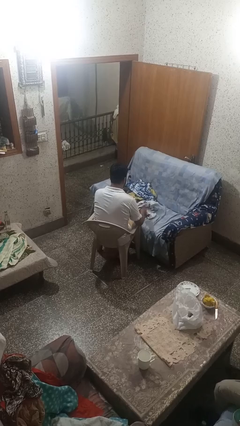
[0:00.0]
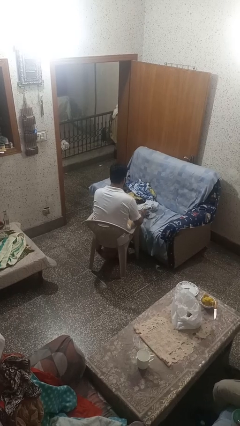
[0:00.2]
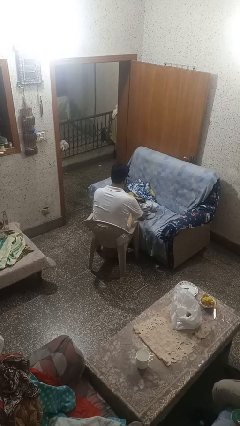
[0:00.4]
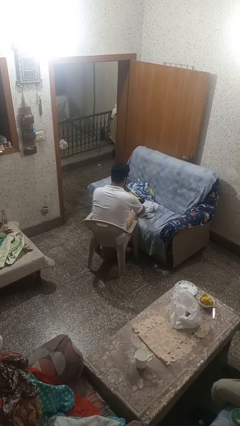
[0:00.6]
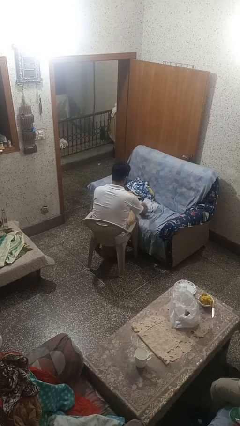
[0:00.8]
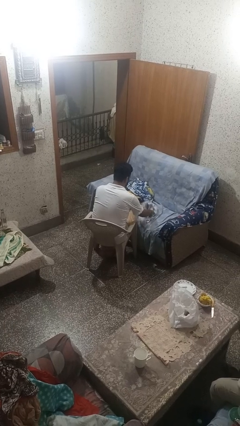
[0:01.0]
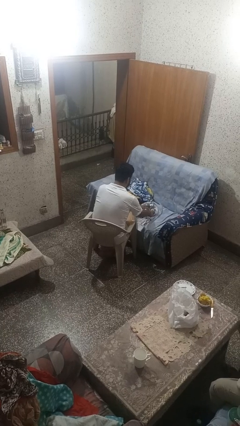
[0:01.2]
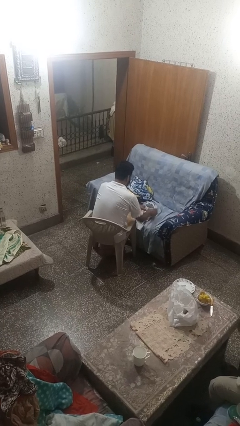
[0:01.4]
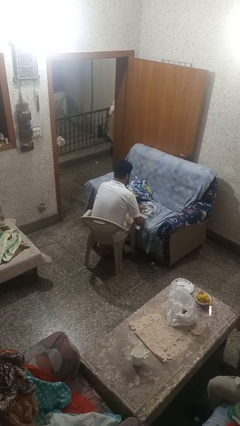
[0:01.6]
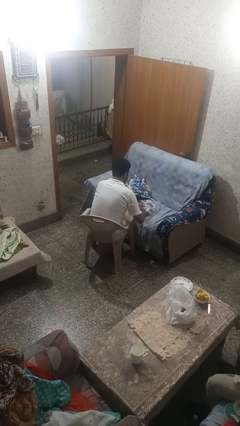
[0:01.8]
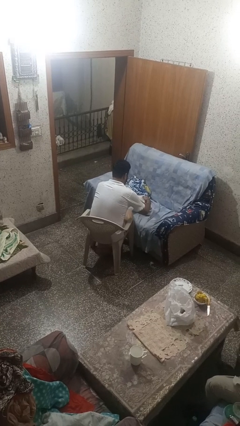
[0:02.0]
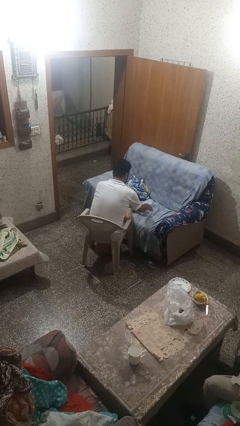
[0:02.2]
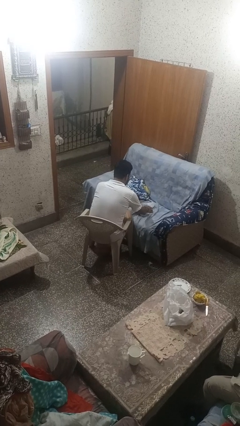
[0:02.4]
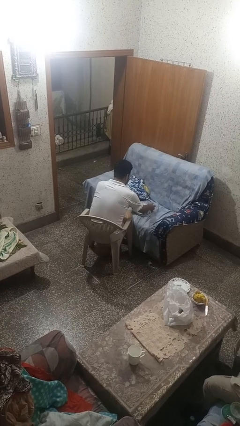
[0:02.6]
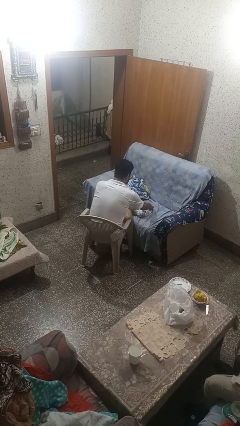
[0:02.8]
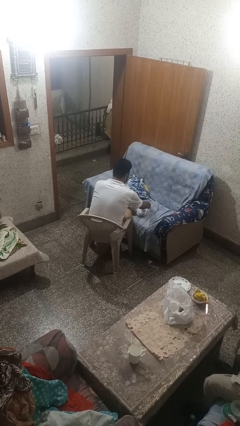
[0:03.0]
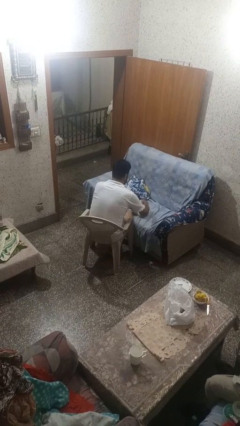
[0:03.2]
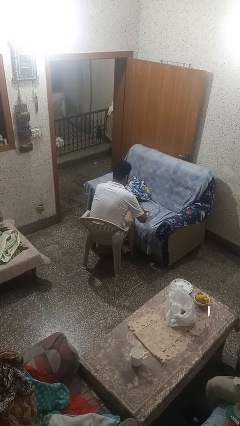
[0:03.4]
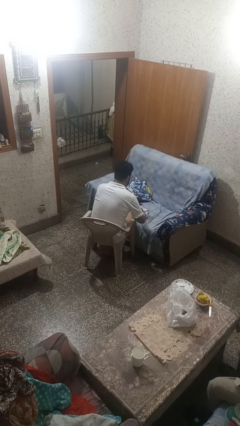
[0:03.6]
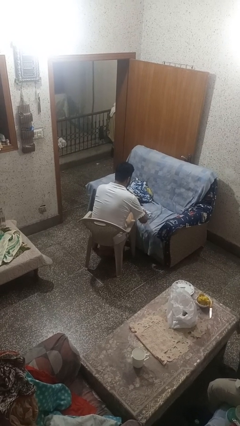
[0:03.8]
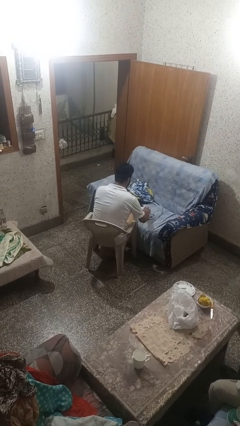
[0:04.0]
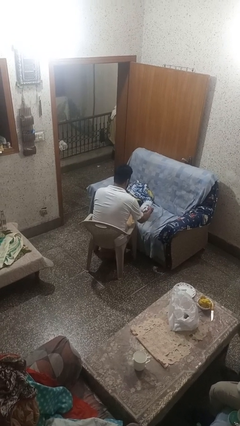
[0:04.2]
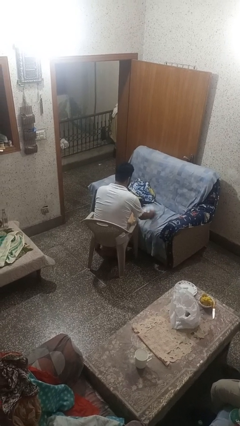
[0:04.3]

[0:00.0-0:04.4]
person folds shirt

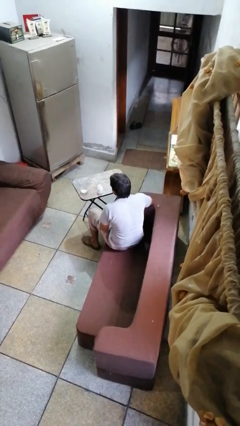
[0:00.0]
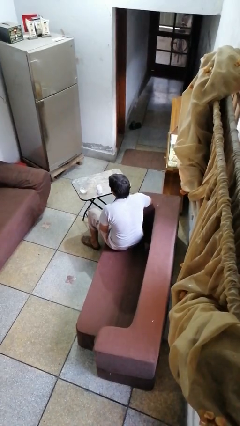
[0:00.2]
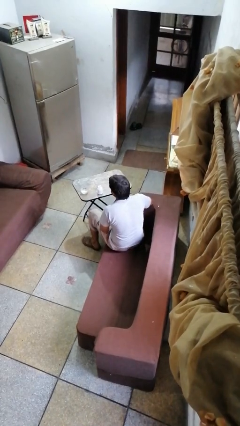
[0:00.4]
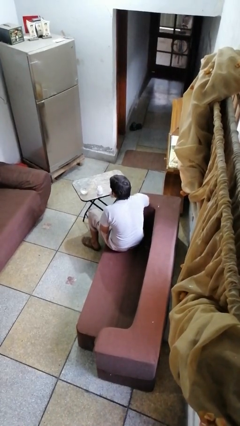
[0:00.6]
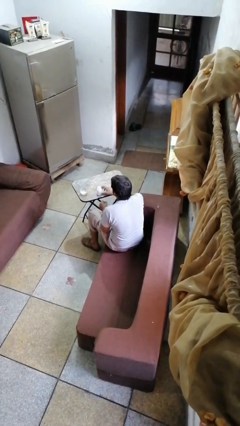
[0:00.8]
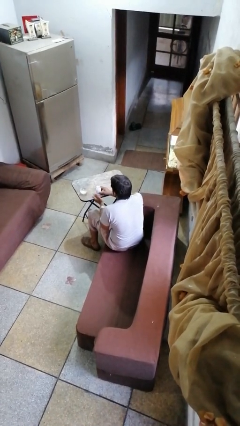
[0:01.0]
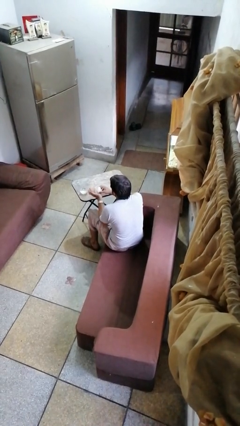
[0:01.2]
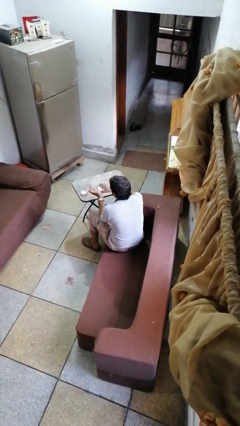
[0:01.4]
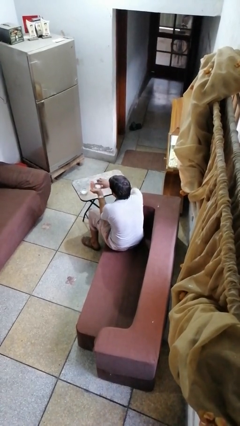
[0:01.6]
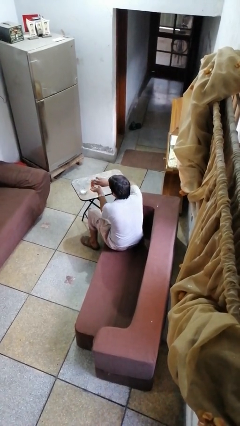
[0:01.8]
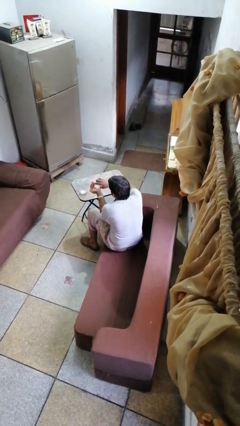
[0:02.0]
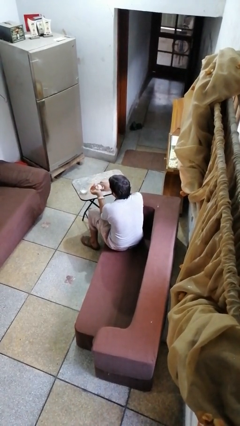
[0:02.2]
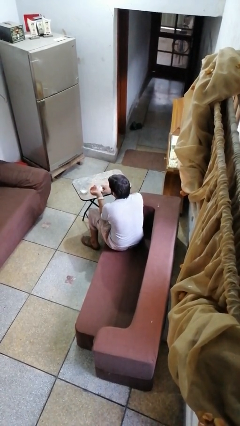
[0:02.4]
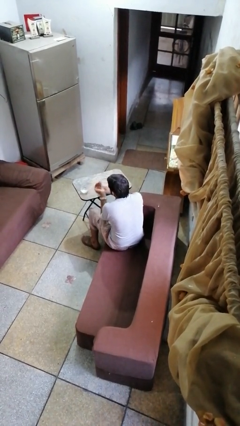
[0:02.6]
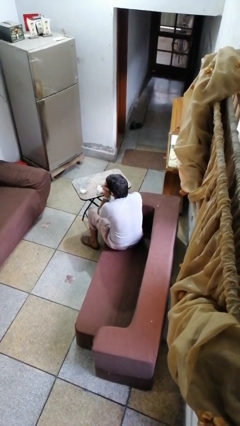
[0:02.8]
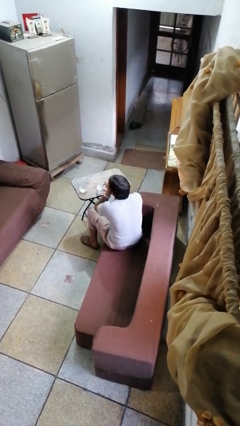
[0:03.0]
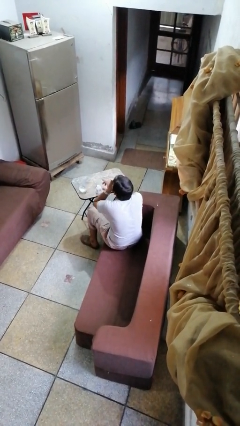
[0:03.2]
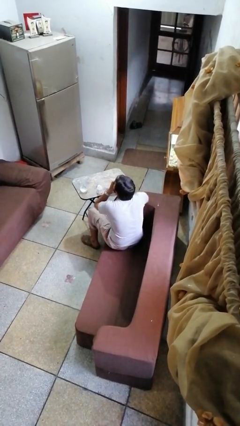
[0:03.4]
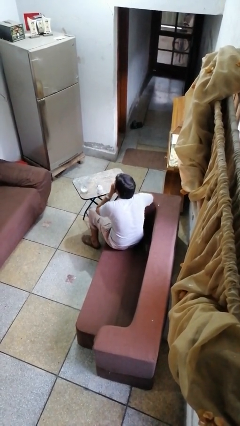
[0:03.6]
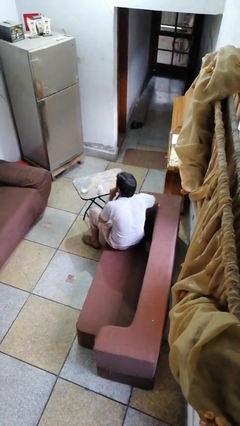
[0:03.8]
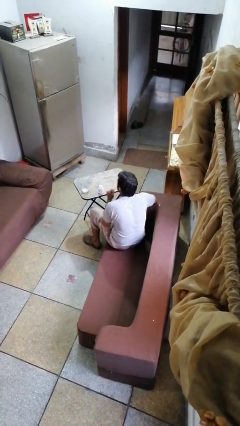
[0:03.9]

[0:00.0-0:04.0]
person takes medicine pills

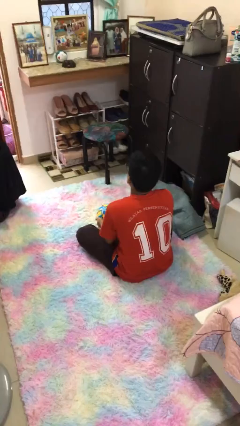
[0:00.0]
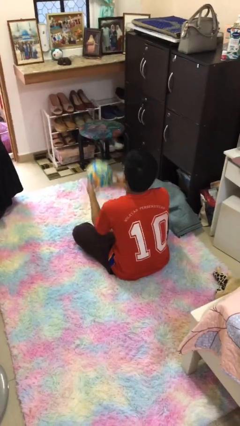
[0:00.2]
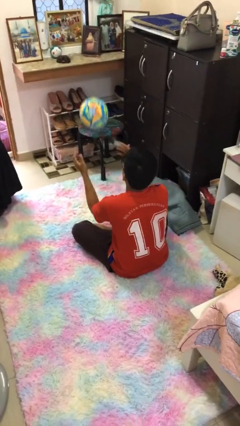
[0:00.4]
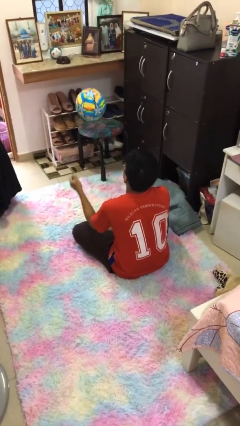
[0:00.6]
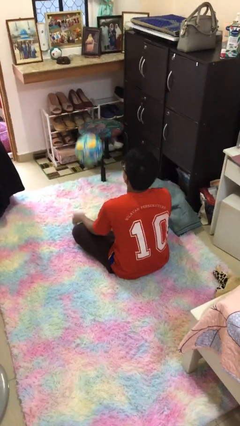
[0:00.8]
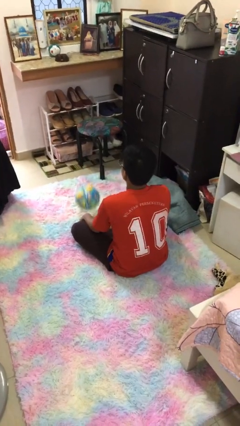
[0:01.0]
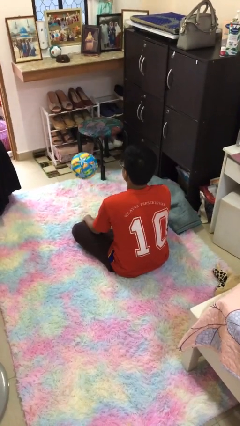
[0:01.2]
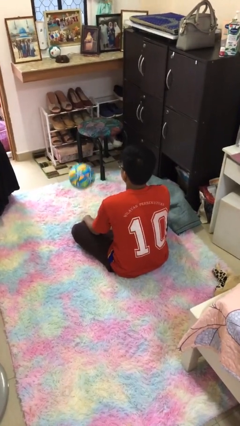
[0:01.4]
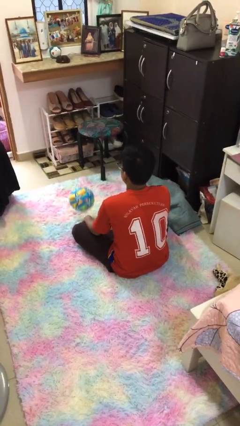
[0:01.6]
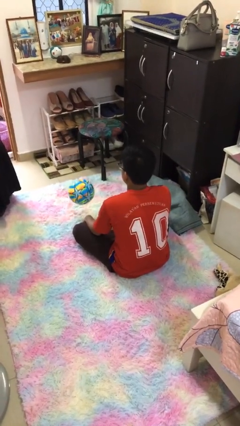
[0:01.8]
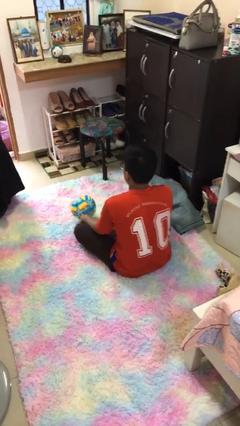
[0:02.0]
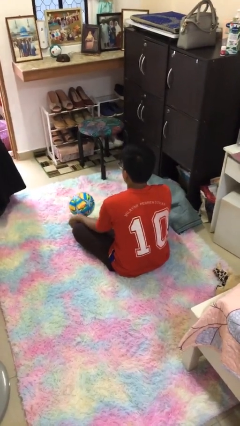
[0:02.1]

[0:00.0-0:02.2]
person bounces ball on floor

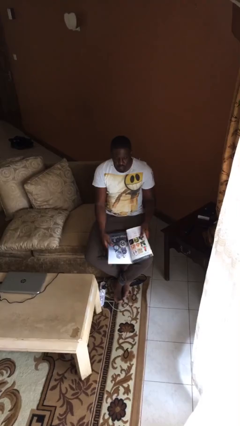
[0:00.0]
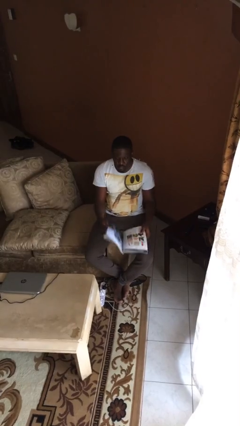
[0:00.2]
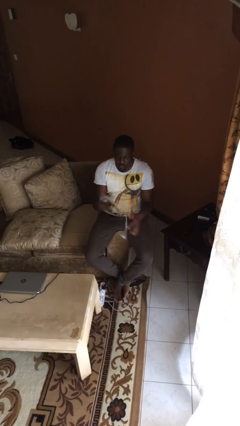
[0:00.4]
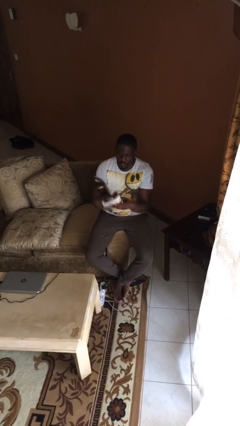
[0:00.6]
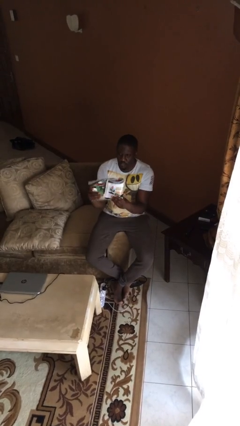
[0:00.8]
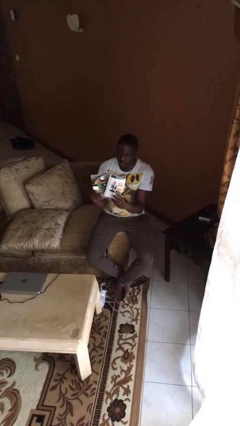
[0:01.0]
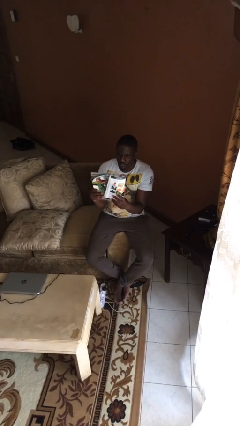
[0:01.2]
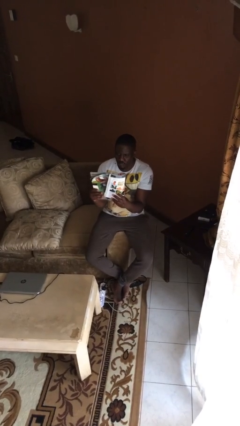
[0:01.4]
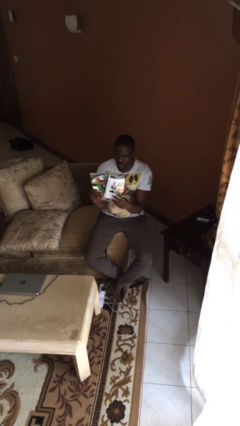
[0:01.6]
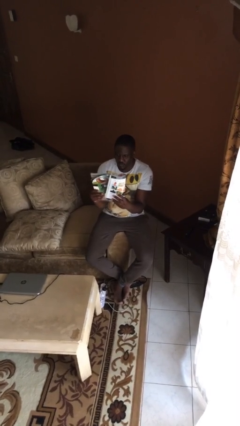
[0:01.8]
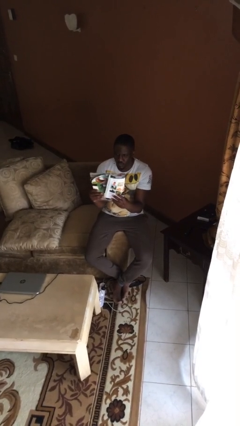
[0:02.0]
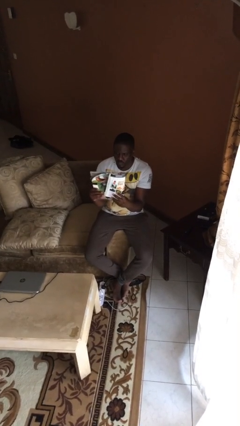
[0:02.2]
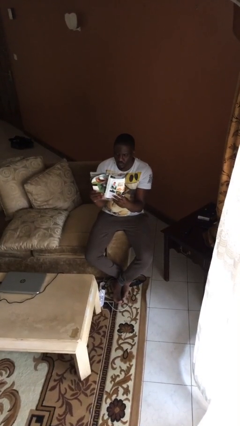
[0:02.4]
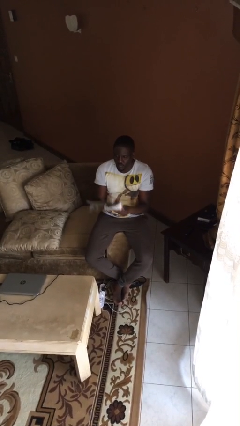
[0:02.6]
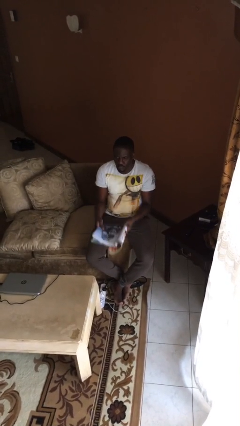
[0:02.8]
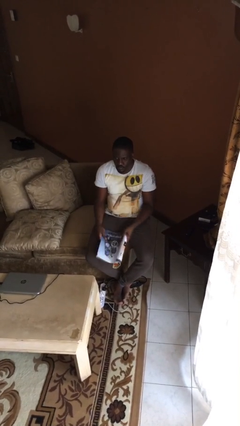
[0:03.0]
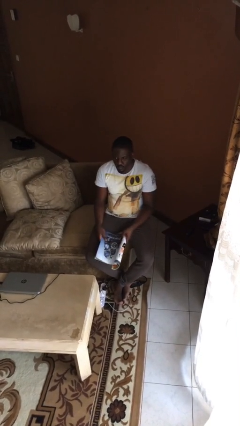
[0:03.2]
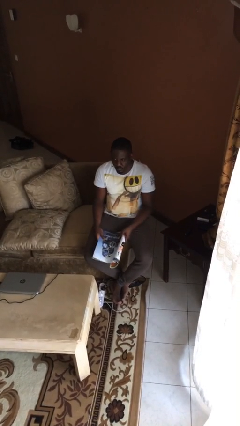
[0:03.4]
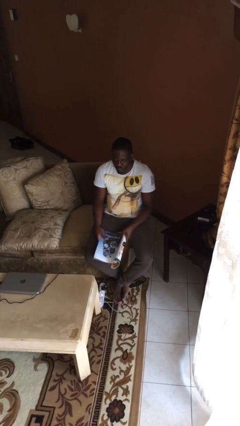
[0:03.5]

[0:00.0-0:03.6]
person reads document

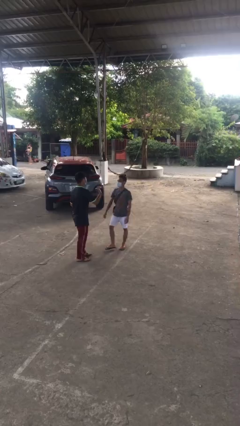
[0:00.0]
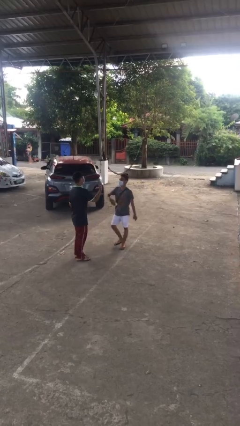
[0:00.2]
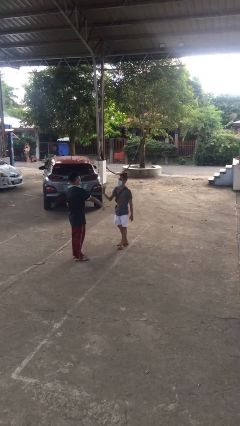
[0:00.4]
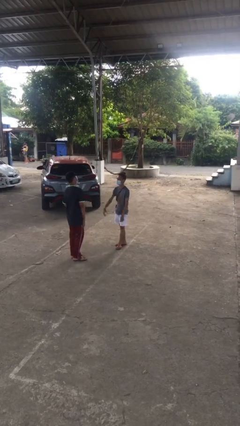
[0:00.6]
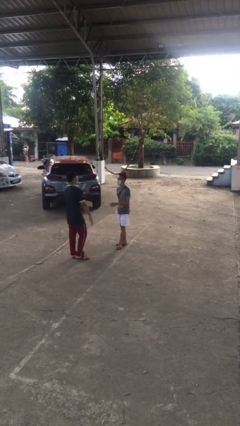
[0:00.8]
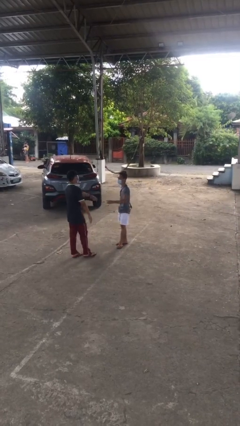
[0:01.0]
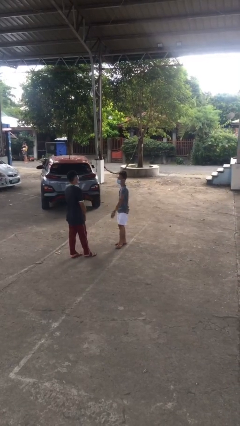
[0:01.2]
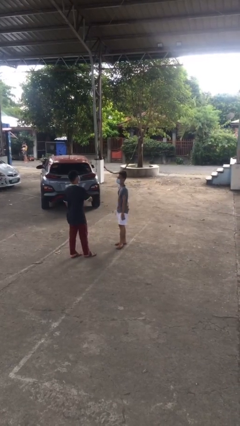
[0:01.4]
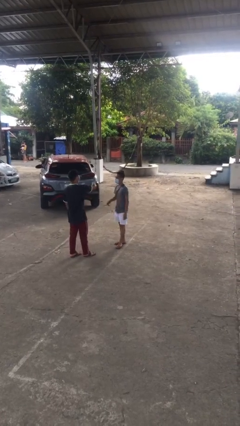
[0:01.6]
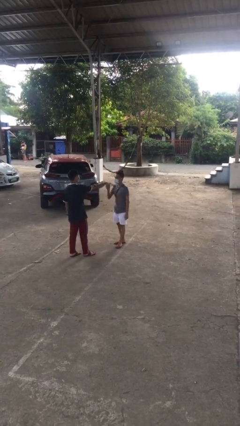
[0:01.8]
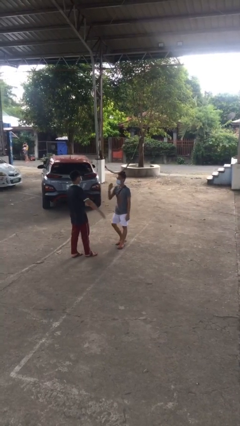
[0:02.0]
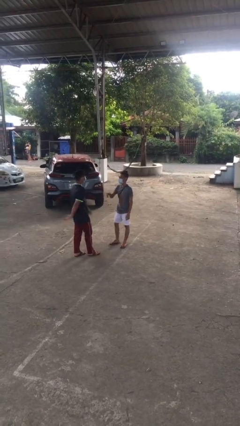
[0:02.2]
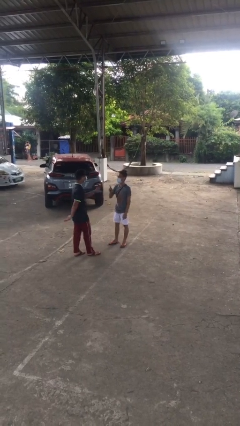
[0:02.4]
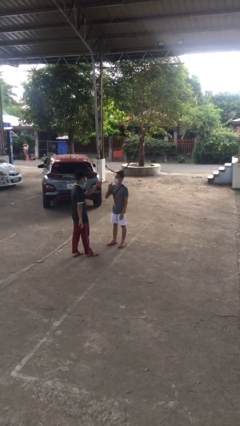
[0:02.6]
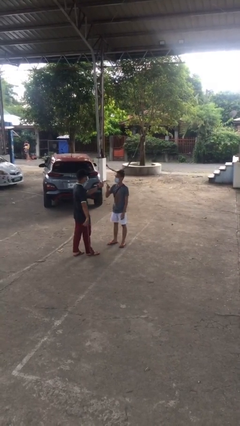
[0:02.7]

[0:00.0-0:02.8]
person talks to person

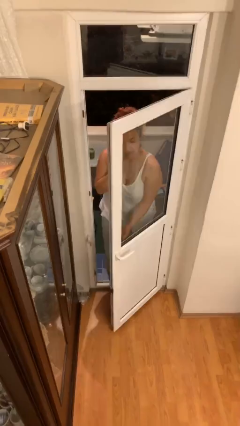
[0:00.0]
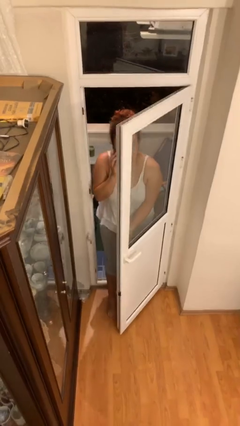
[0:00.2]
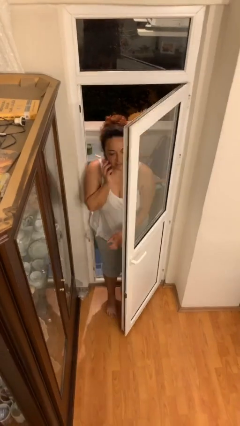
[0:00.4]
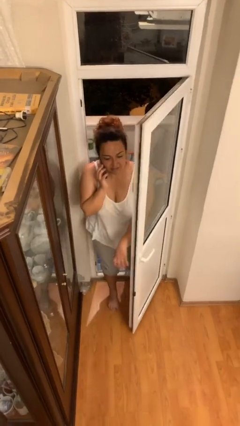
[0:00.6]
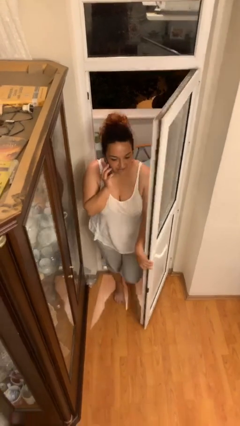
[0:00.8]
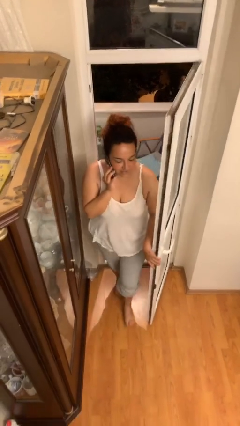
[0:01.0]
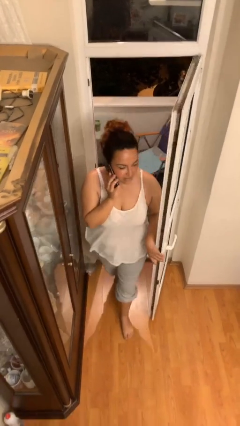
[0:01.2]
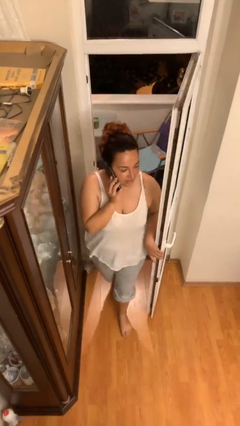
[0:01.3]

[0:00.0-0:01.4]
person enters scene through structure
